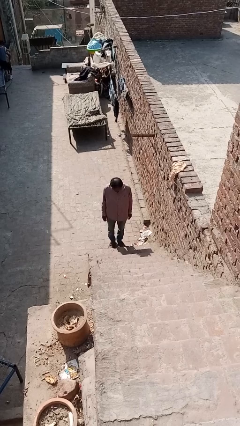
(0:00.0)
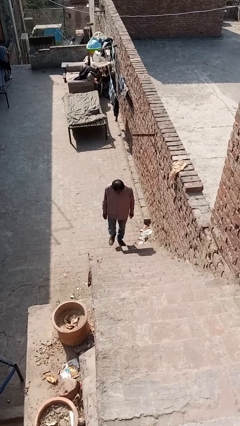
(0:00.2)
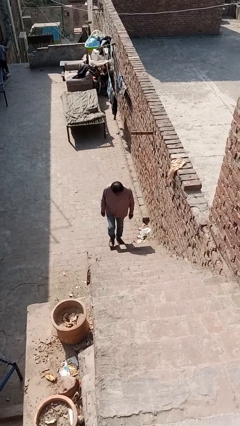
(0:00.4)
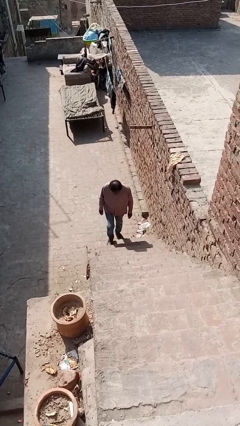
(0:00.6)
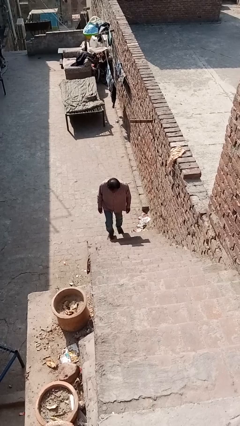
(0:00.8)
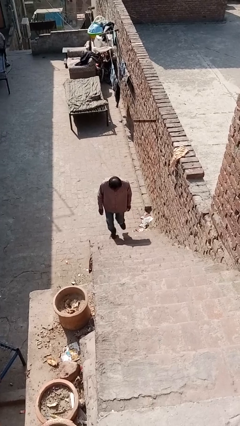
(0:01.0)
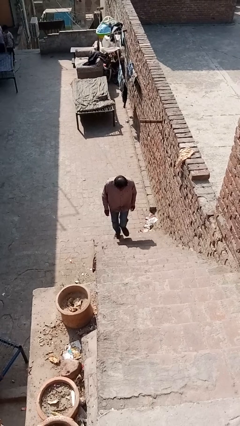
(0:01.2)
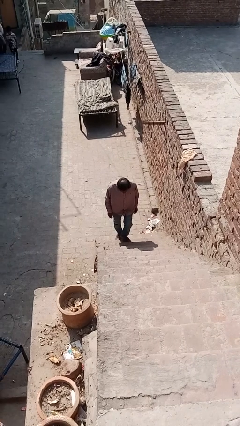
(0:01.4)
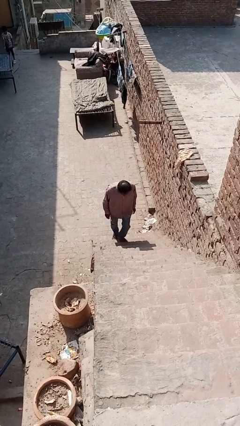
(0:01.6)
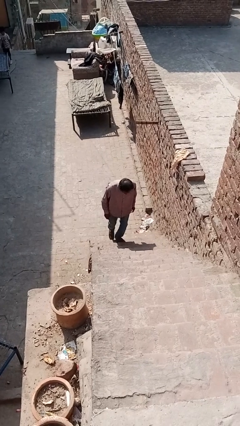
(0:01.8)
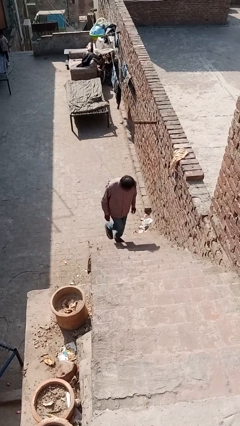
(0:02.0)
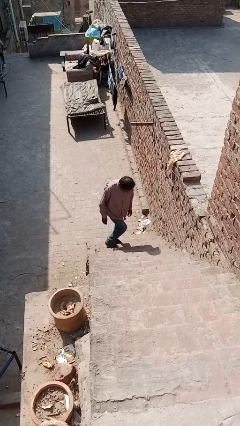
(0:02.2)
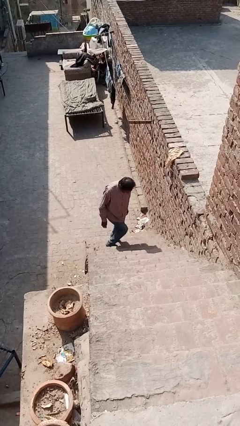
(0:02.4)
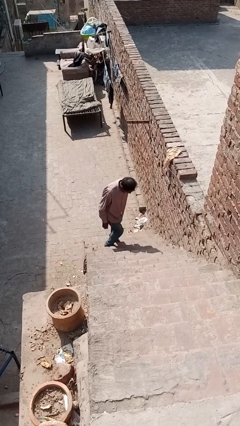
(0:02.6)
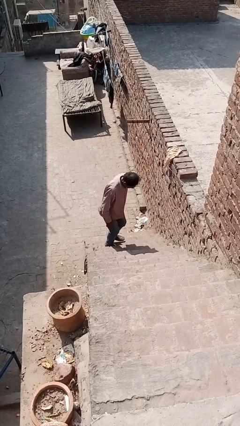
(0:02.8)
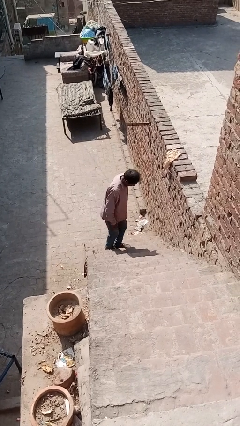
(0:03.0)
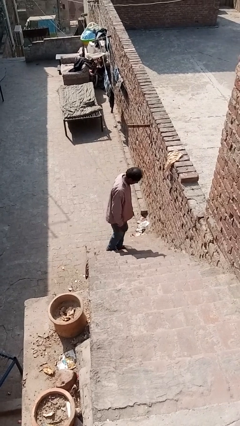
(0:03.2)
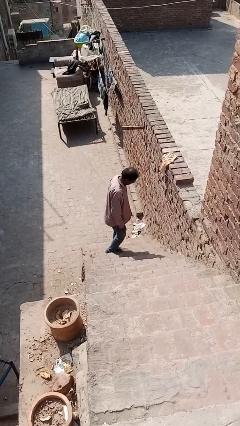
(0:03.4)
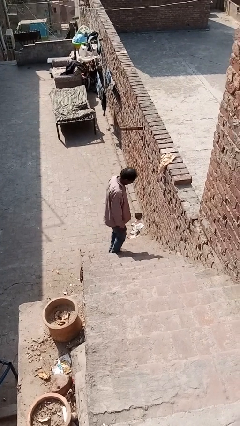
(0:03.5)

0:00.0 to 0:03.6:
person climbs up stairs

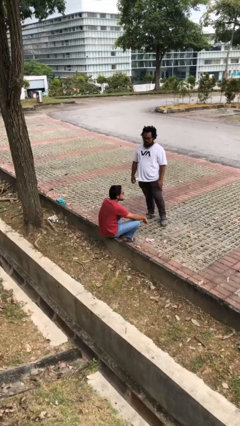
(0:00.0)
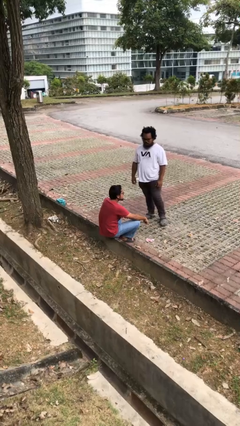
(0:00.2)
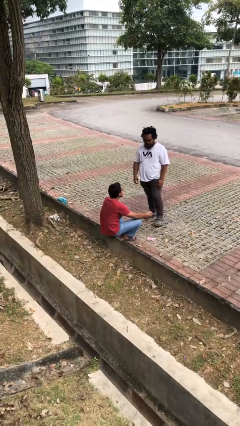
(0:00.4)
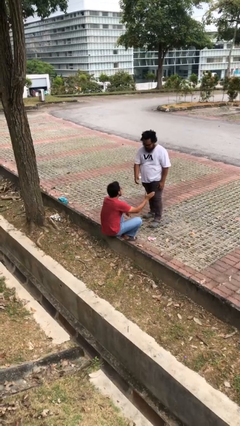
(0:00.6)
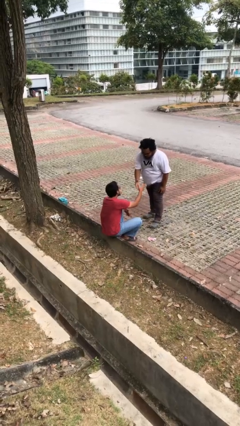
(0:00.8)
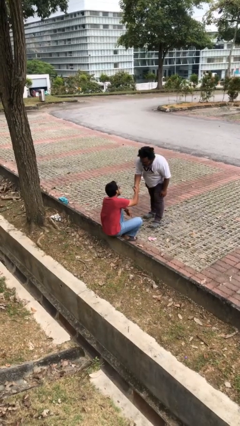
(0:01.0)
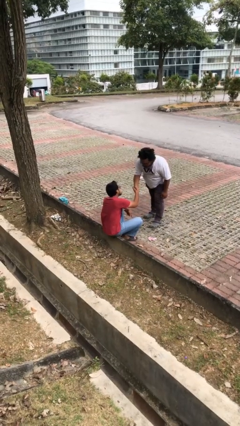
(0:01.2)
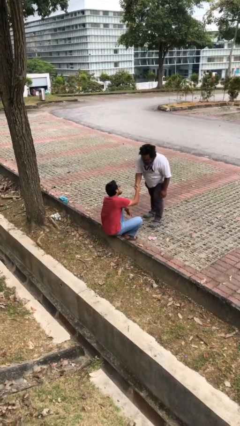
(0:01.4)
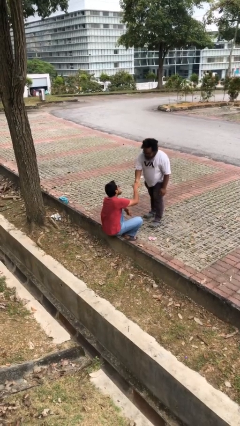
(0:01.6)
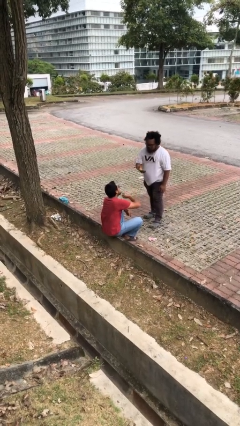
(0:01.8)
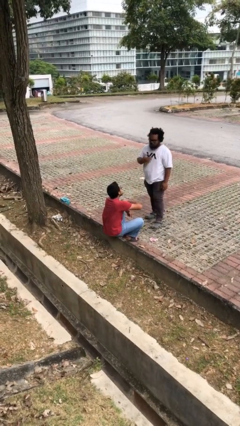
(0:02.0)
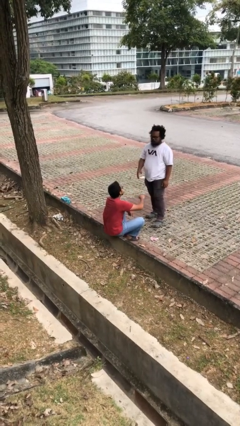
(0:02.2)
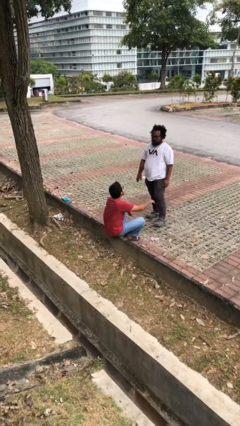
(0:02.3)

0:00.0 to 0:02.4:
person shakes hand

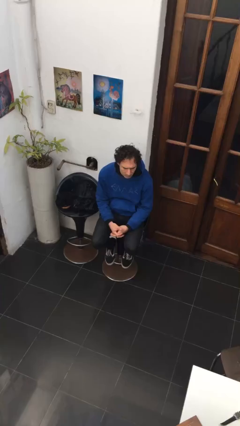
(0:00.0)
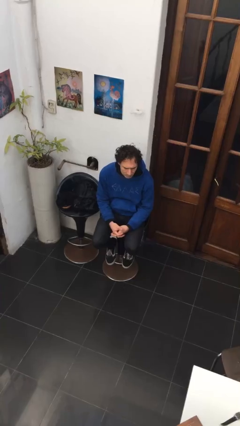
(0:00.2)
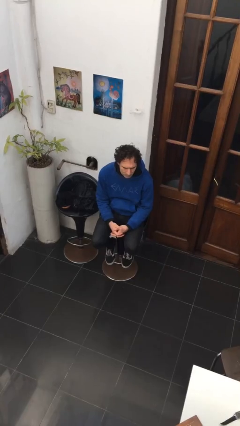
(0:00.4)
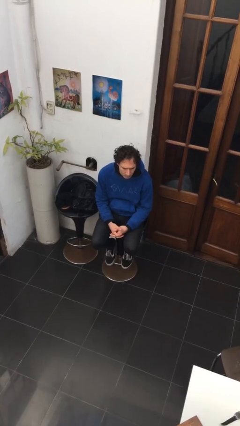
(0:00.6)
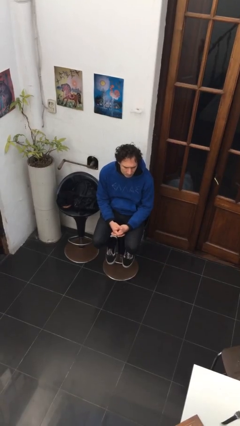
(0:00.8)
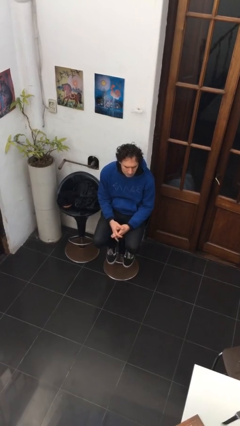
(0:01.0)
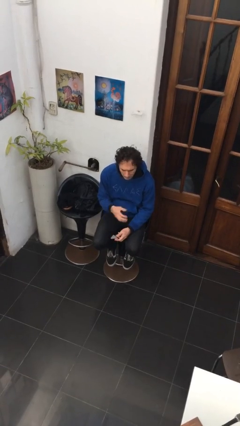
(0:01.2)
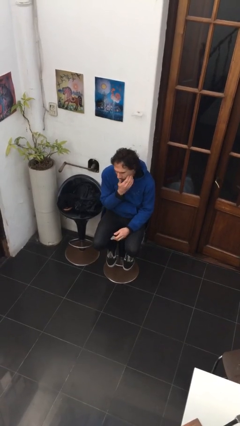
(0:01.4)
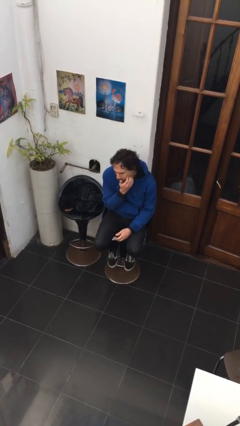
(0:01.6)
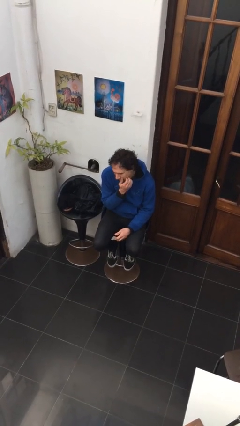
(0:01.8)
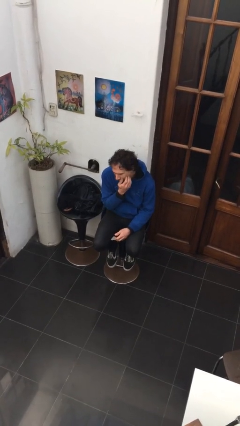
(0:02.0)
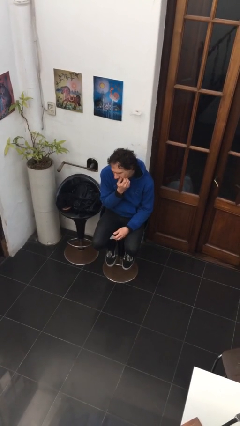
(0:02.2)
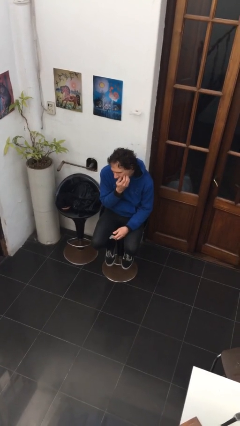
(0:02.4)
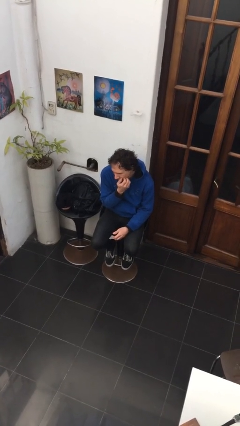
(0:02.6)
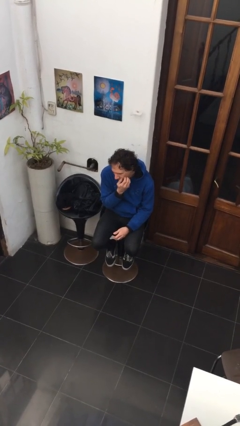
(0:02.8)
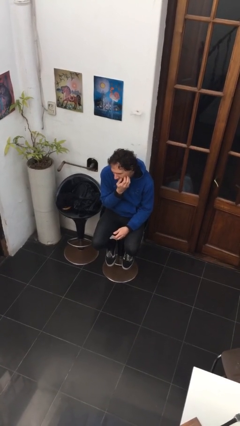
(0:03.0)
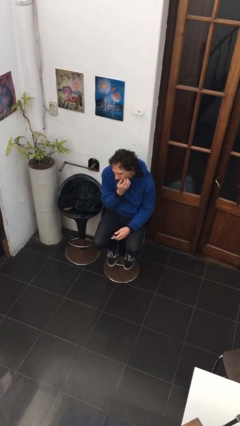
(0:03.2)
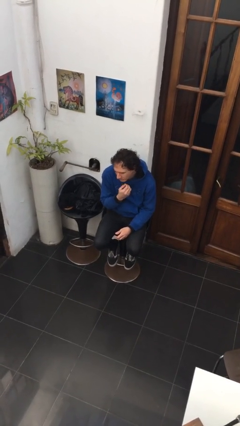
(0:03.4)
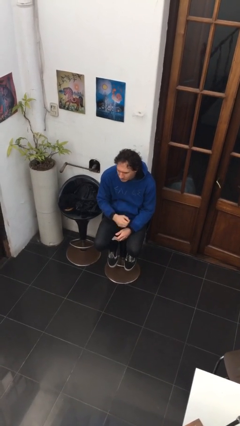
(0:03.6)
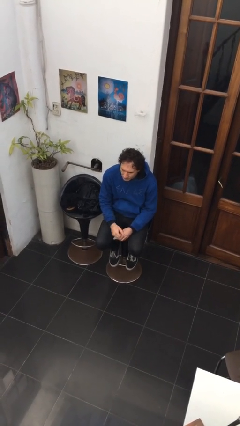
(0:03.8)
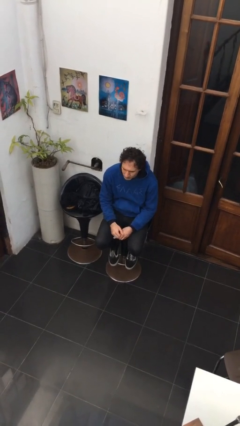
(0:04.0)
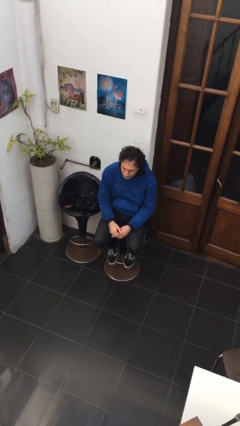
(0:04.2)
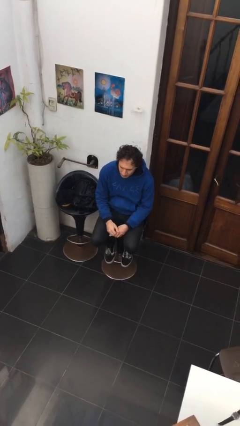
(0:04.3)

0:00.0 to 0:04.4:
person scratches face

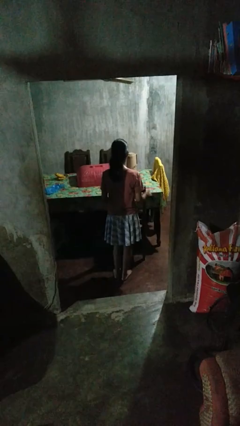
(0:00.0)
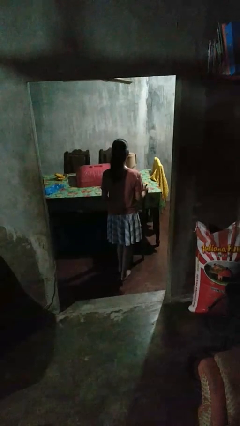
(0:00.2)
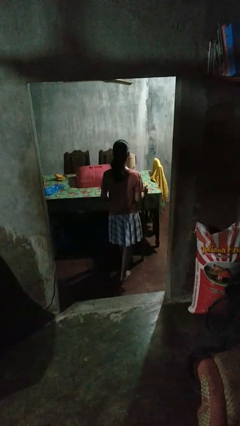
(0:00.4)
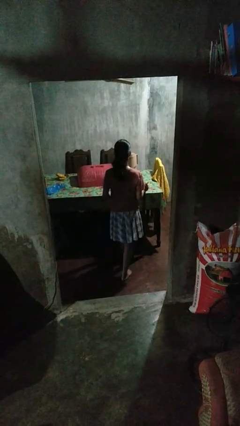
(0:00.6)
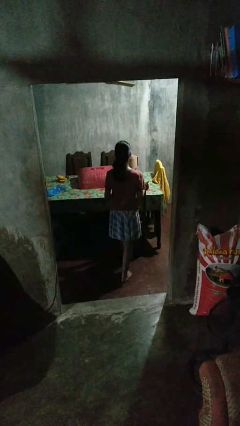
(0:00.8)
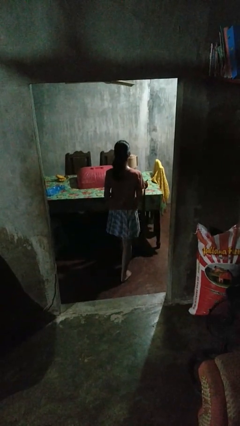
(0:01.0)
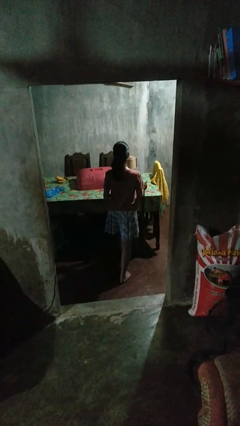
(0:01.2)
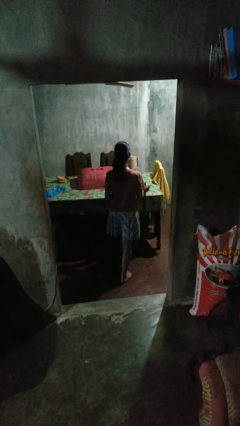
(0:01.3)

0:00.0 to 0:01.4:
person pushes in chair

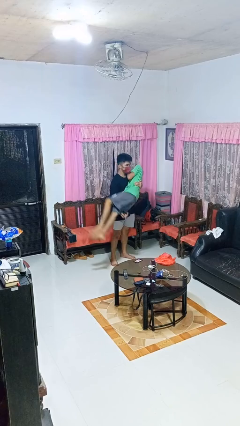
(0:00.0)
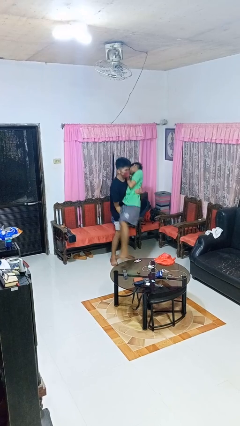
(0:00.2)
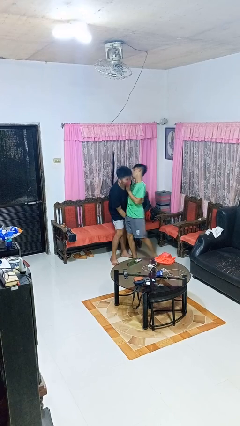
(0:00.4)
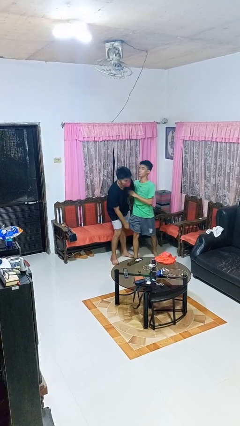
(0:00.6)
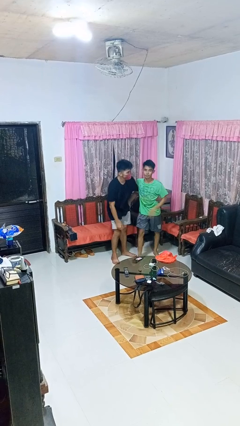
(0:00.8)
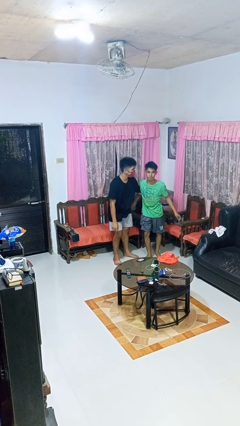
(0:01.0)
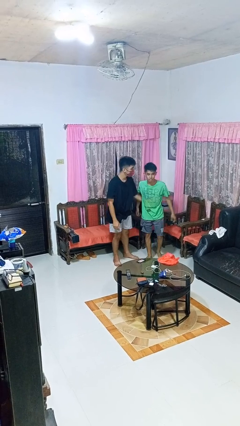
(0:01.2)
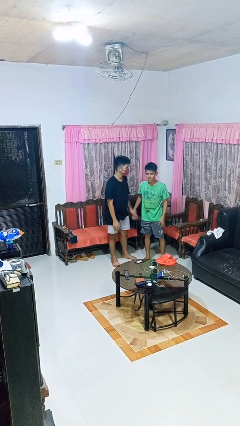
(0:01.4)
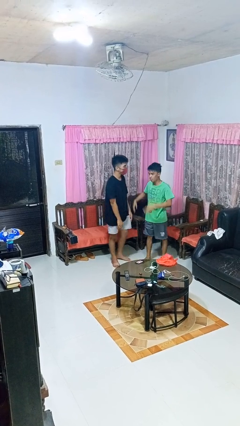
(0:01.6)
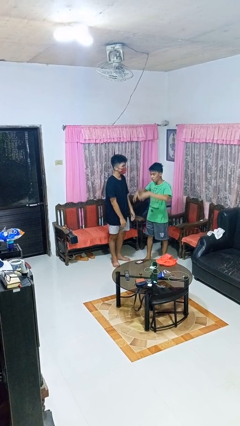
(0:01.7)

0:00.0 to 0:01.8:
person puts down person

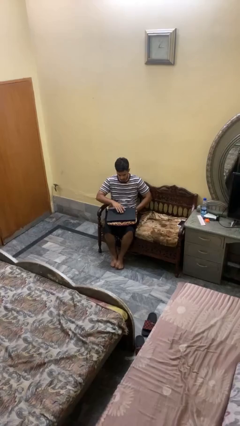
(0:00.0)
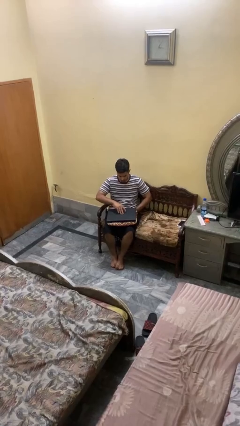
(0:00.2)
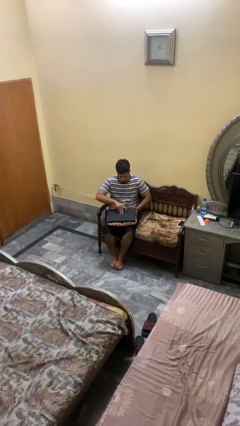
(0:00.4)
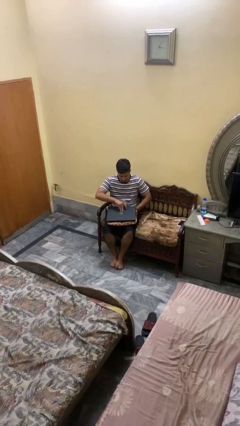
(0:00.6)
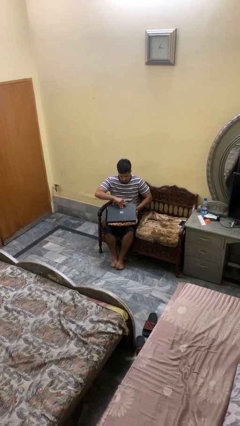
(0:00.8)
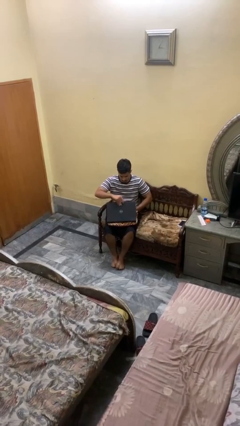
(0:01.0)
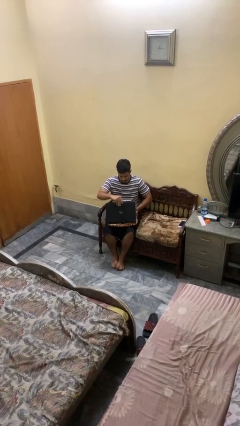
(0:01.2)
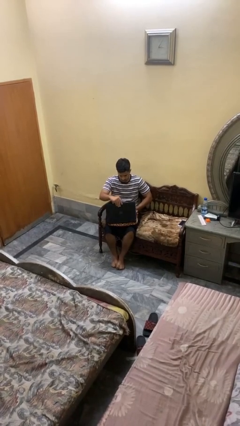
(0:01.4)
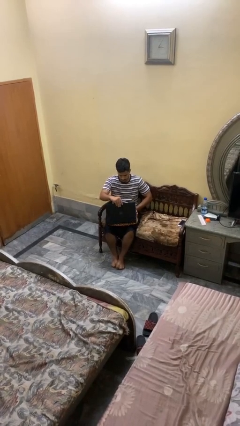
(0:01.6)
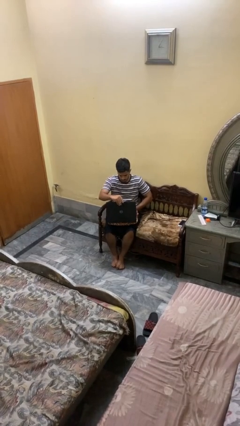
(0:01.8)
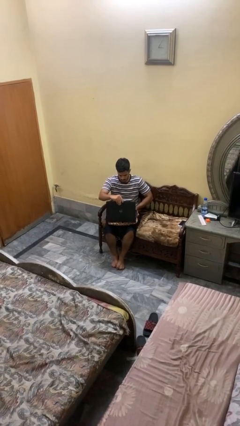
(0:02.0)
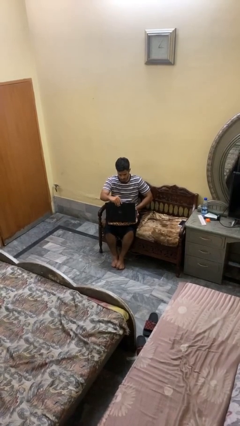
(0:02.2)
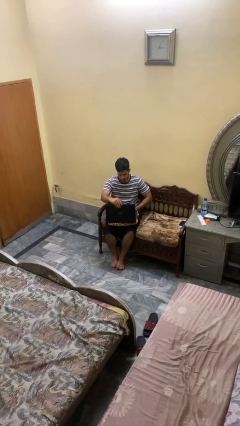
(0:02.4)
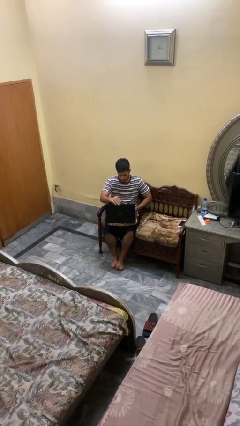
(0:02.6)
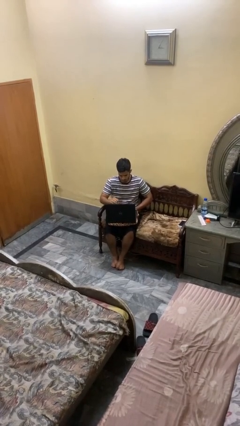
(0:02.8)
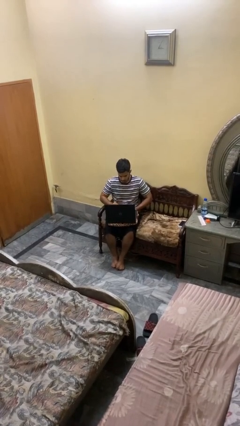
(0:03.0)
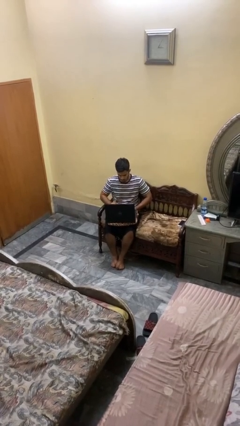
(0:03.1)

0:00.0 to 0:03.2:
person opens laptop

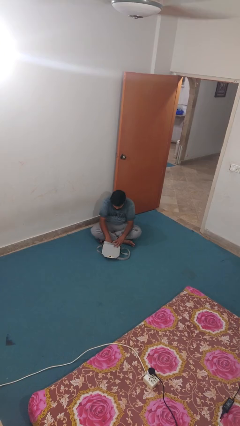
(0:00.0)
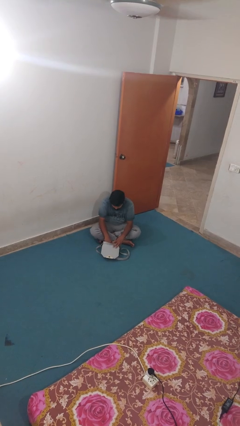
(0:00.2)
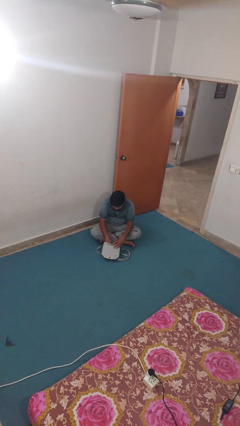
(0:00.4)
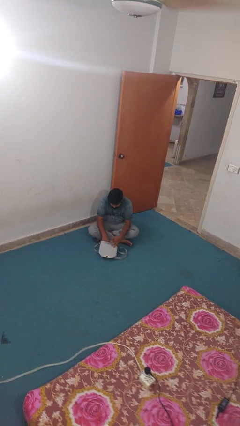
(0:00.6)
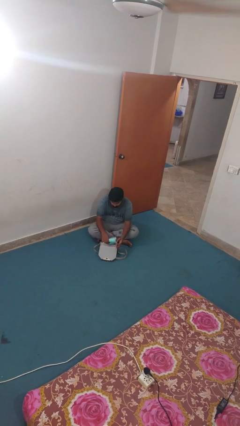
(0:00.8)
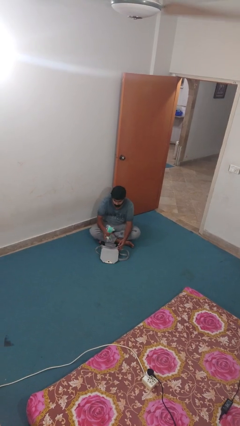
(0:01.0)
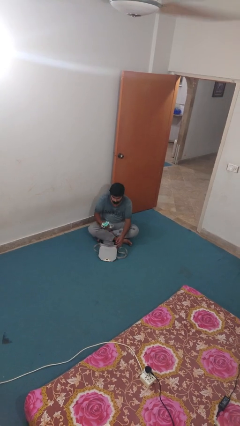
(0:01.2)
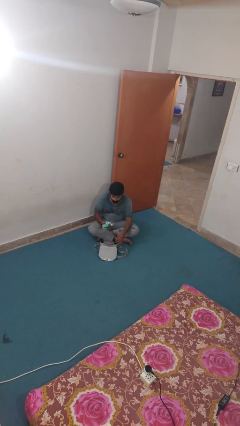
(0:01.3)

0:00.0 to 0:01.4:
person takes object from purse
